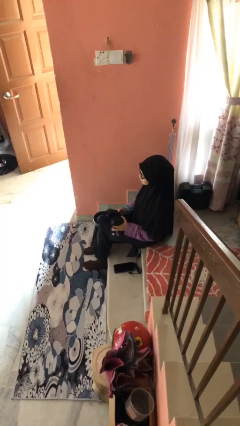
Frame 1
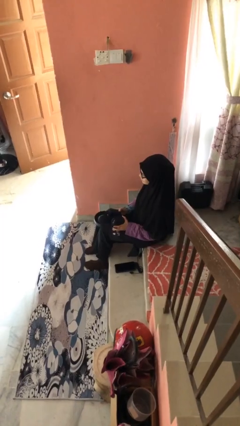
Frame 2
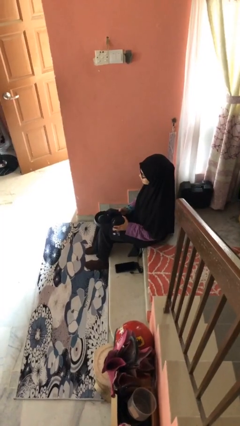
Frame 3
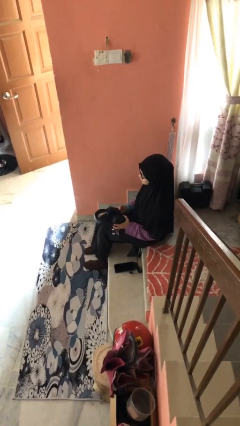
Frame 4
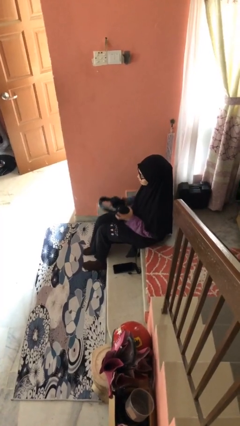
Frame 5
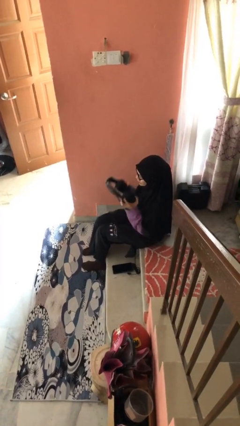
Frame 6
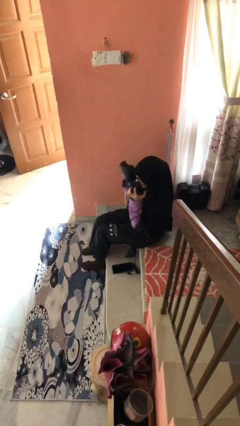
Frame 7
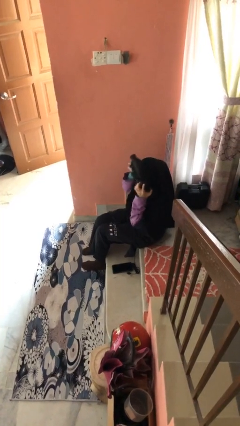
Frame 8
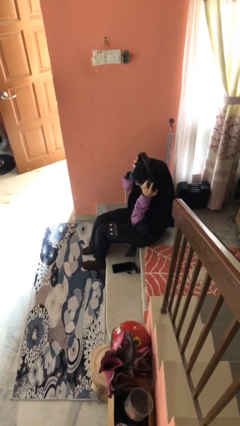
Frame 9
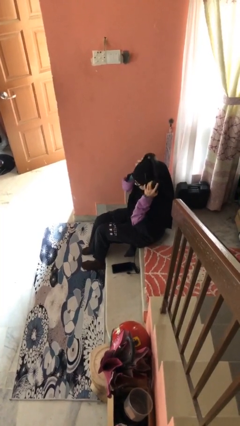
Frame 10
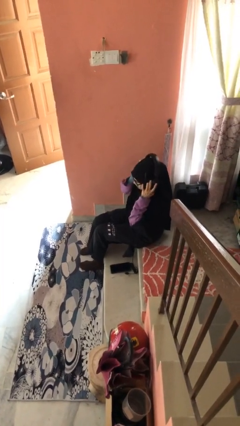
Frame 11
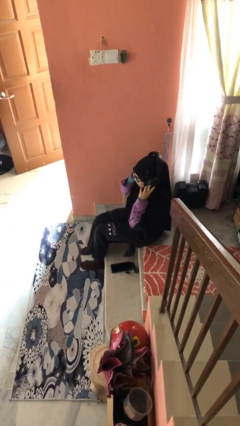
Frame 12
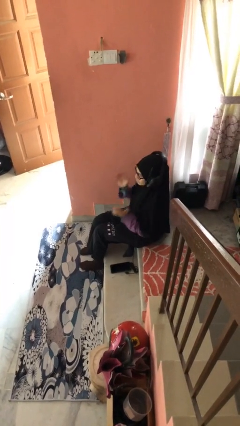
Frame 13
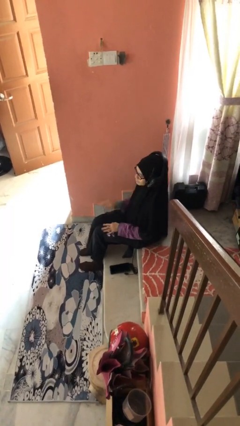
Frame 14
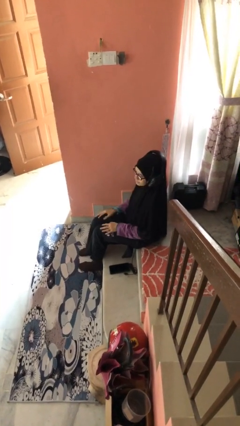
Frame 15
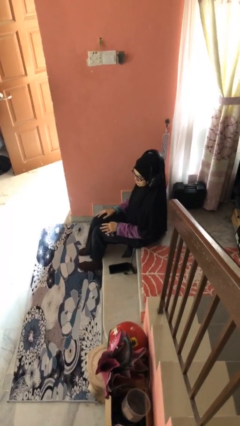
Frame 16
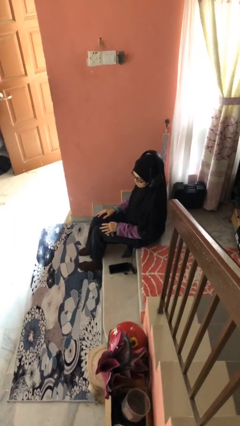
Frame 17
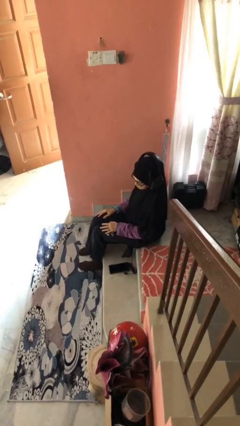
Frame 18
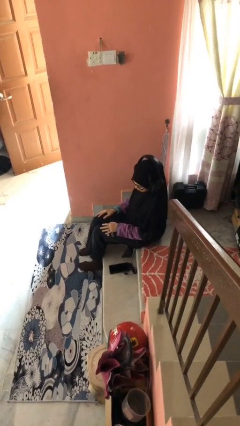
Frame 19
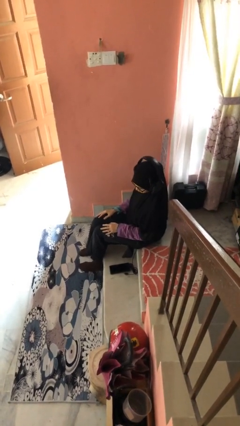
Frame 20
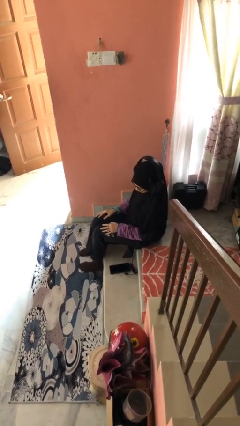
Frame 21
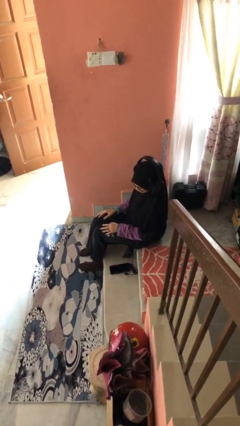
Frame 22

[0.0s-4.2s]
person puts on headphones

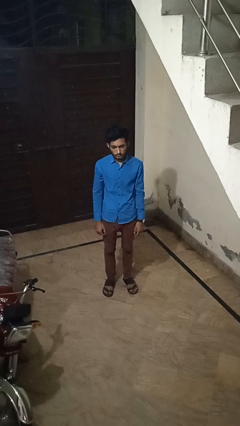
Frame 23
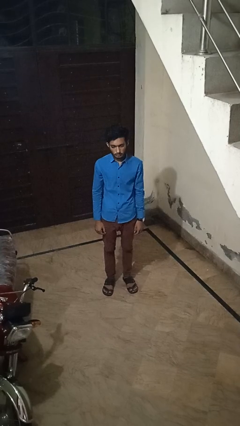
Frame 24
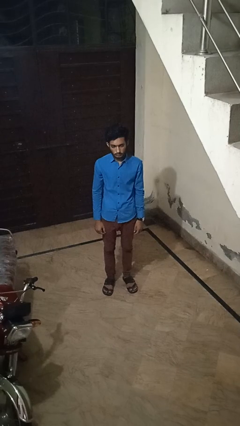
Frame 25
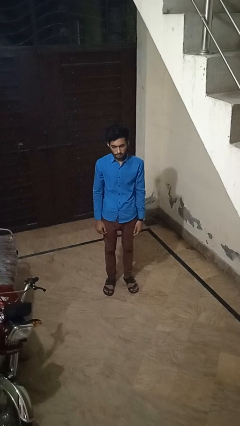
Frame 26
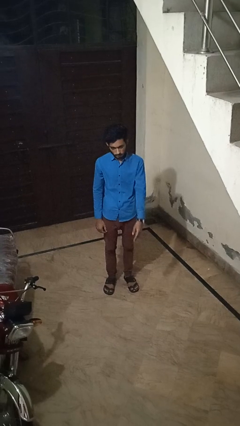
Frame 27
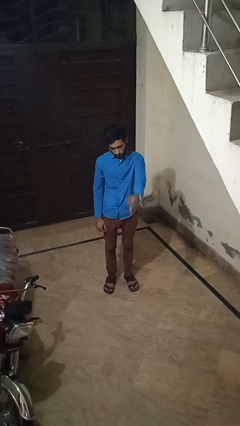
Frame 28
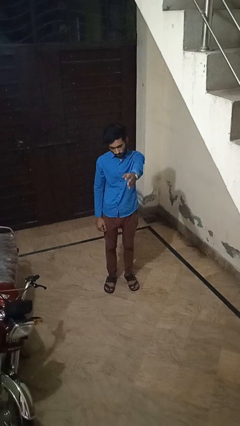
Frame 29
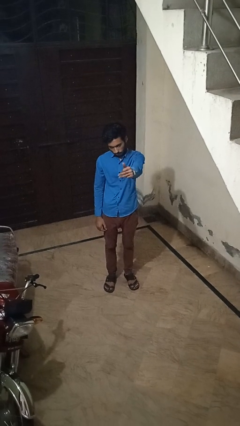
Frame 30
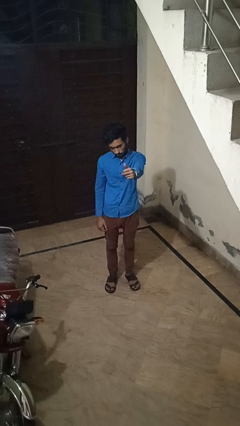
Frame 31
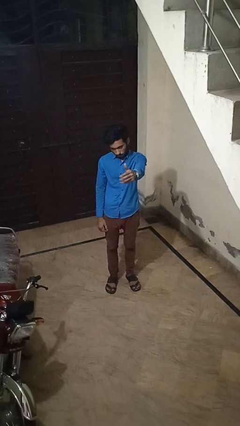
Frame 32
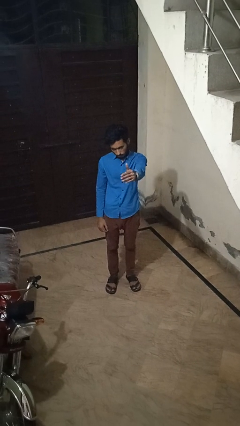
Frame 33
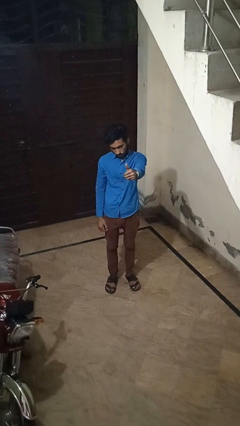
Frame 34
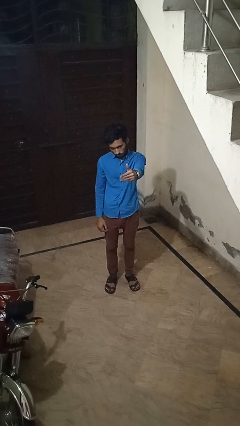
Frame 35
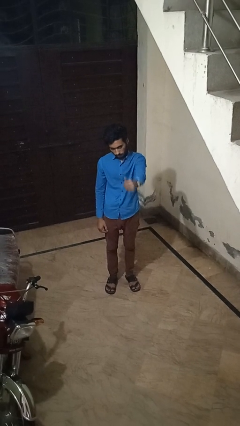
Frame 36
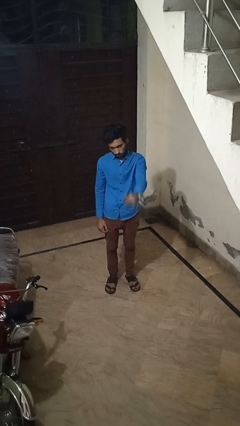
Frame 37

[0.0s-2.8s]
person gestures come here

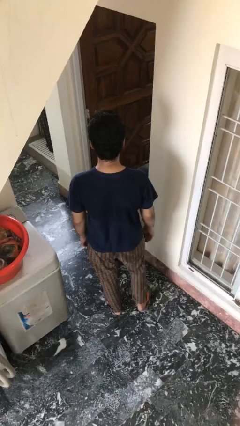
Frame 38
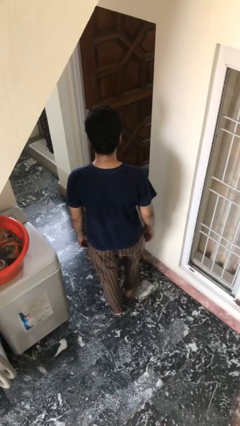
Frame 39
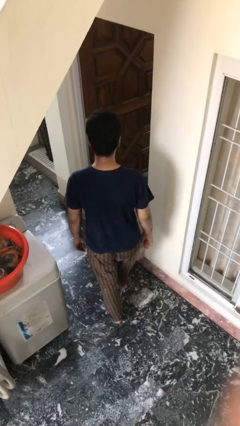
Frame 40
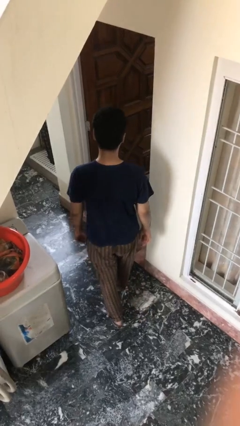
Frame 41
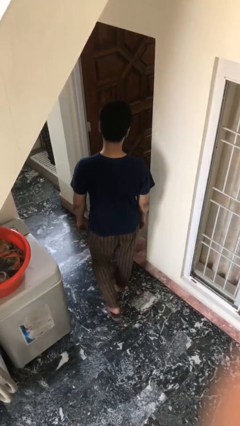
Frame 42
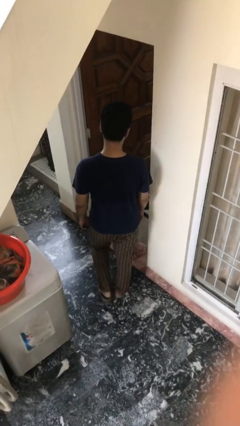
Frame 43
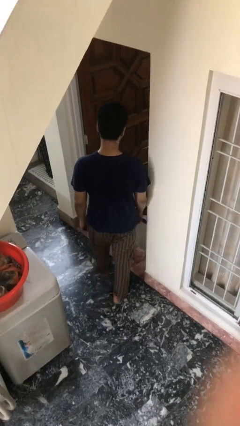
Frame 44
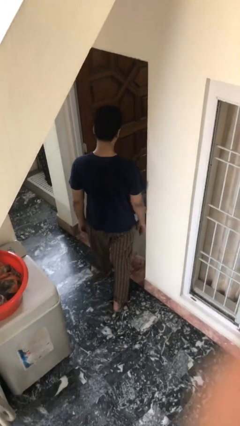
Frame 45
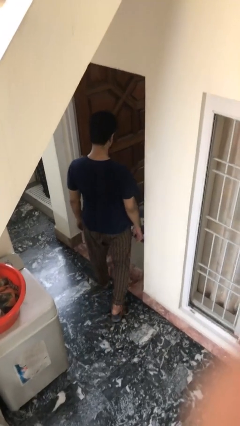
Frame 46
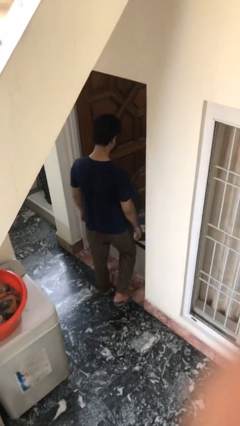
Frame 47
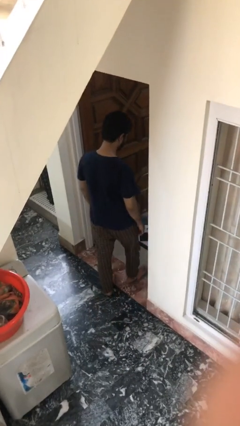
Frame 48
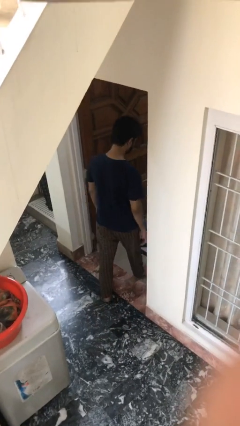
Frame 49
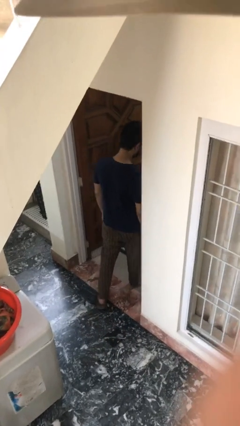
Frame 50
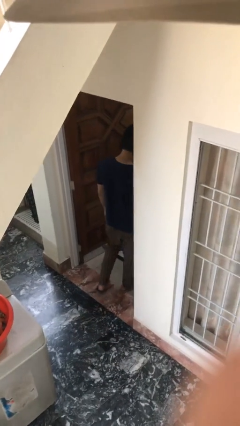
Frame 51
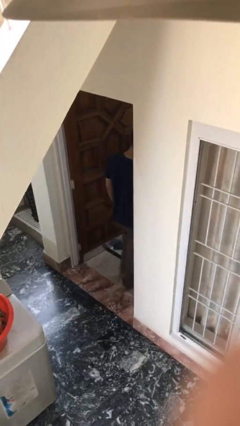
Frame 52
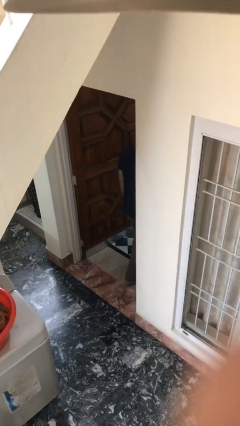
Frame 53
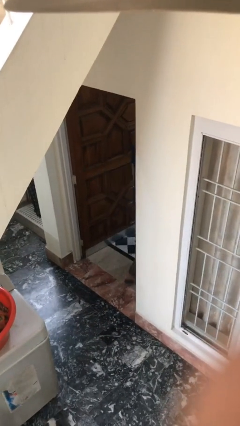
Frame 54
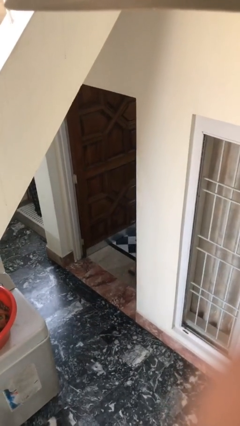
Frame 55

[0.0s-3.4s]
person exits scene through structure

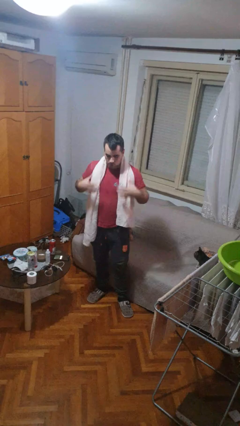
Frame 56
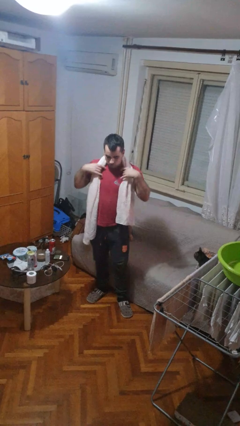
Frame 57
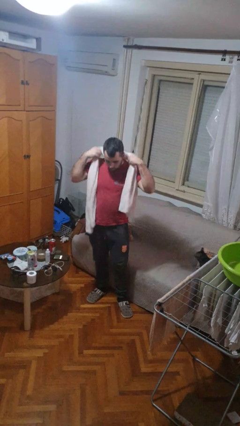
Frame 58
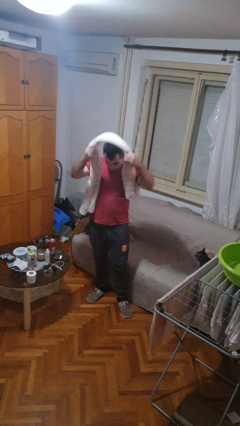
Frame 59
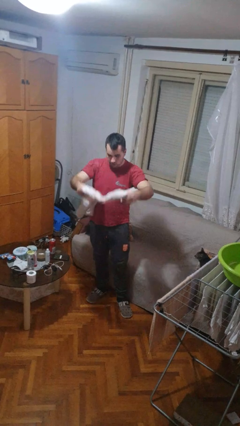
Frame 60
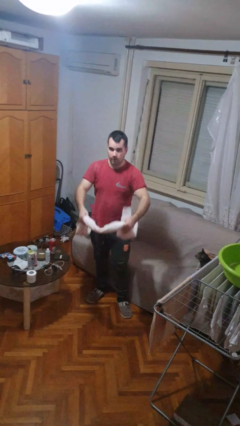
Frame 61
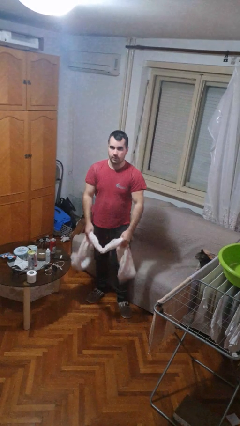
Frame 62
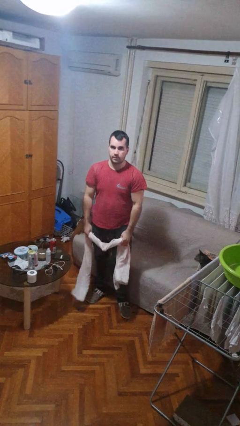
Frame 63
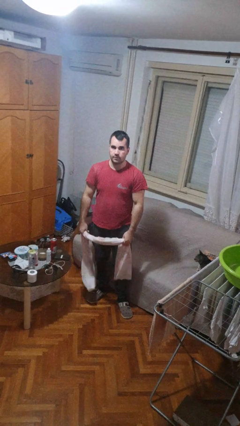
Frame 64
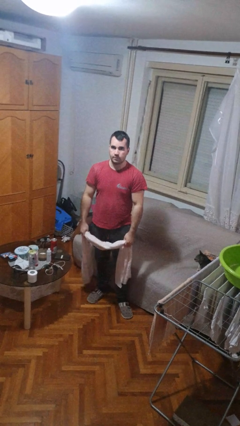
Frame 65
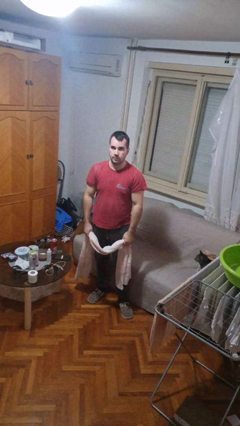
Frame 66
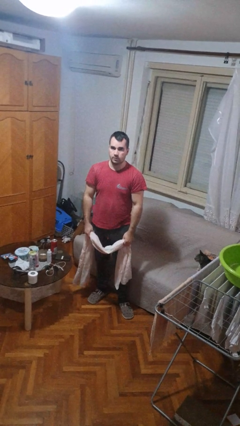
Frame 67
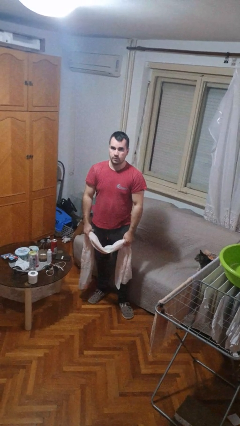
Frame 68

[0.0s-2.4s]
person takes off scarf

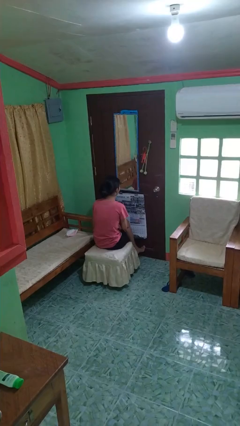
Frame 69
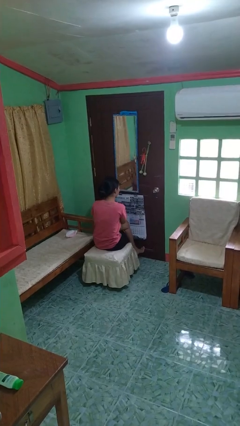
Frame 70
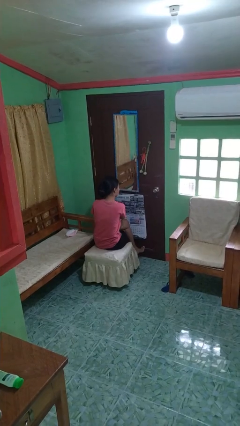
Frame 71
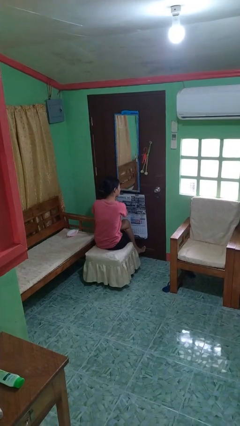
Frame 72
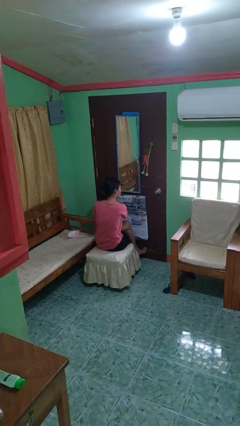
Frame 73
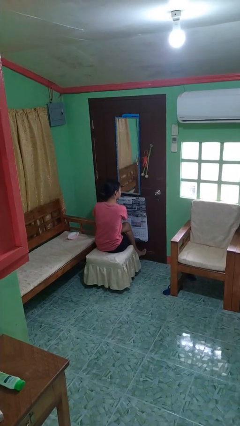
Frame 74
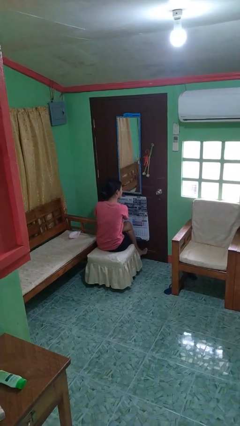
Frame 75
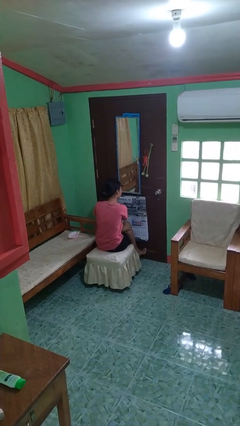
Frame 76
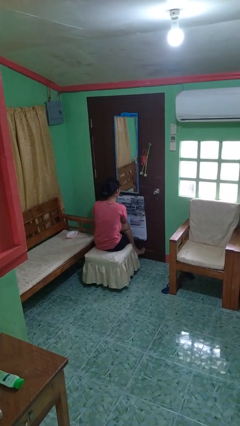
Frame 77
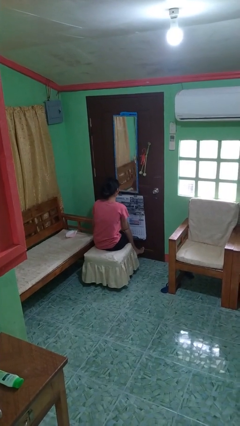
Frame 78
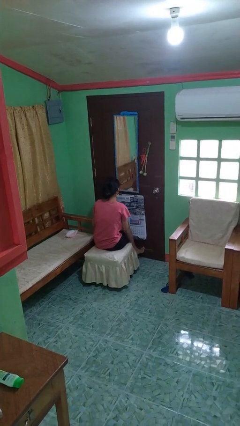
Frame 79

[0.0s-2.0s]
person puts on earrings

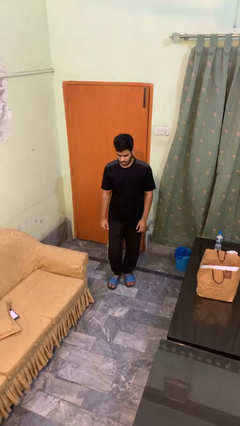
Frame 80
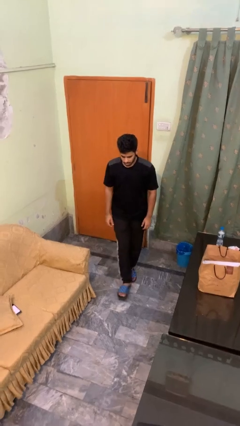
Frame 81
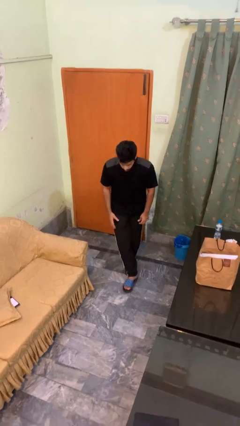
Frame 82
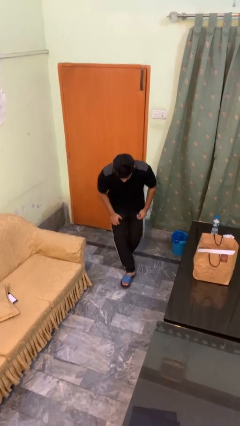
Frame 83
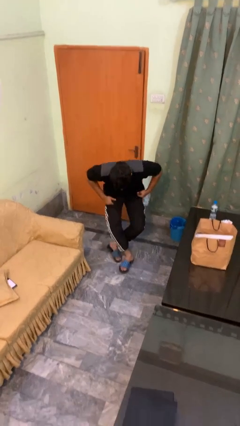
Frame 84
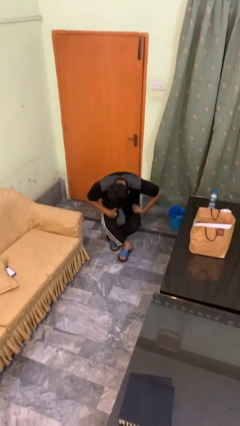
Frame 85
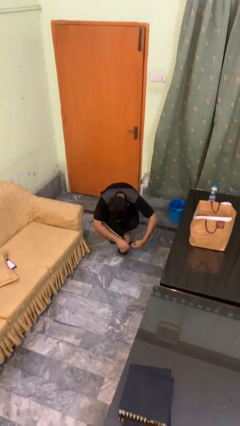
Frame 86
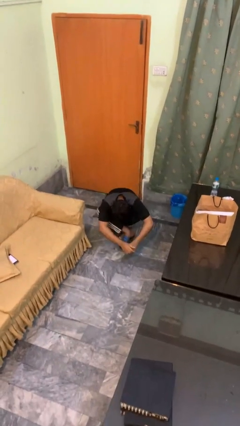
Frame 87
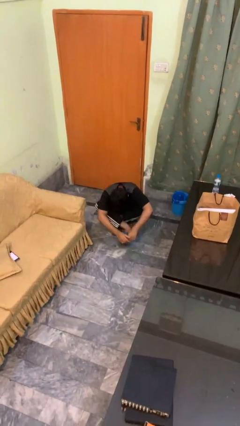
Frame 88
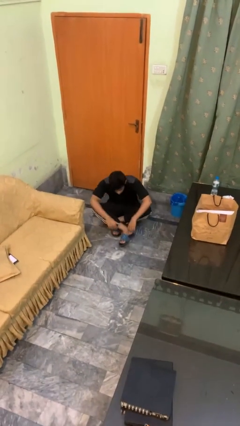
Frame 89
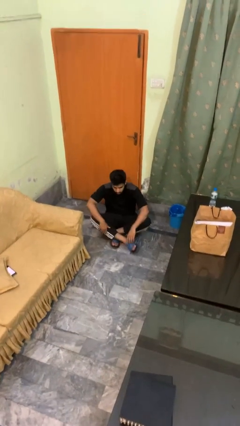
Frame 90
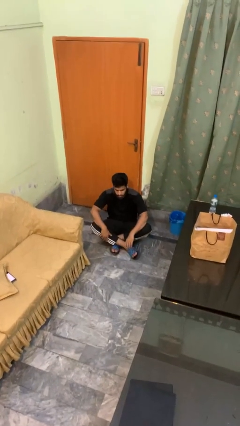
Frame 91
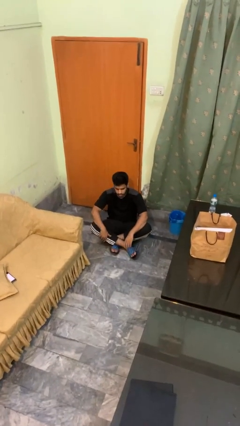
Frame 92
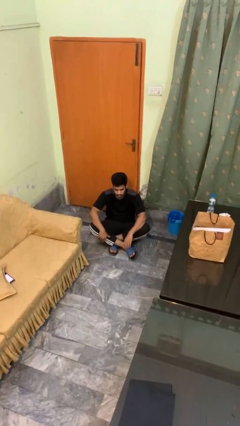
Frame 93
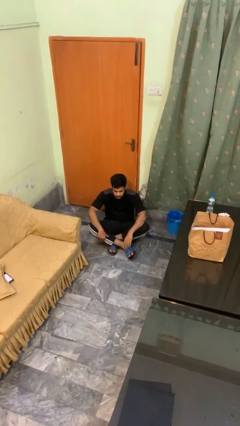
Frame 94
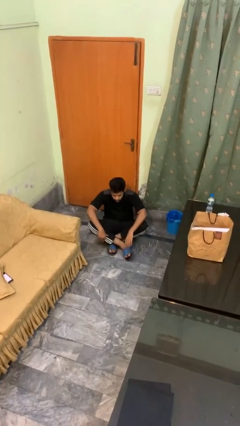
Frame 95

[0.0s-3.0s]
person sits crisscross
